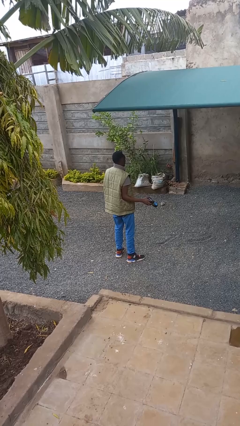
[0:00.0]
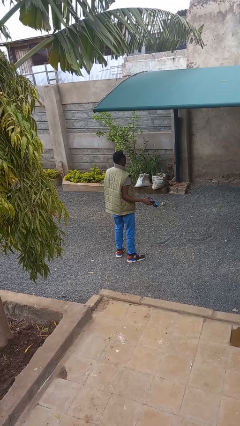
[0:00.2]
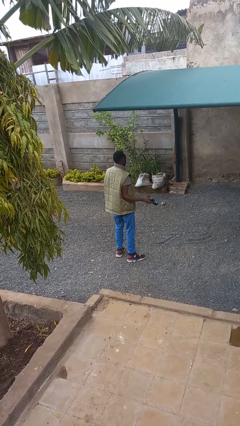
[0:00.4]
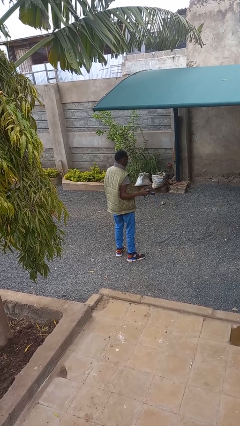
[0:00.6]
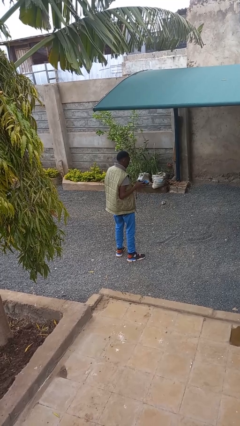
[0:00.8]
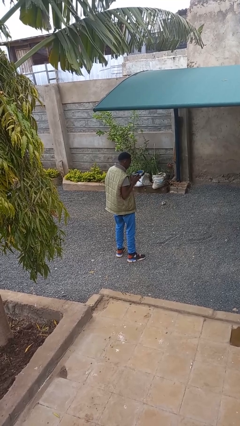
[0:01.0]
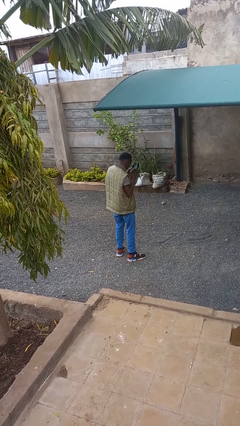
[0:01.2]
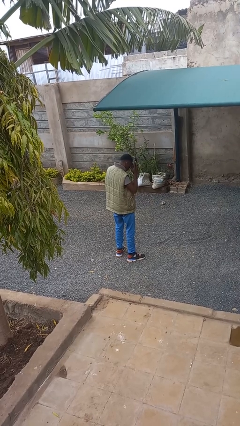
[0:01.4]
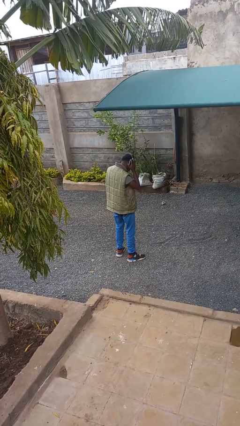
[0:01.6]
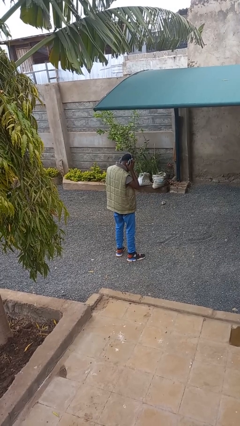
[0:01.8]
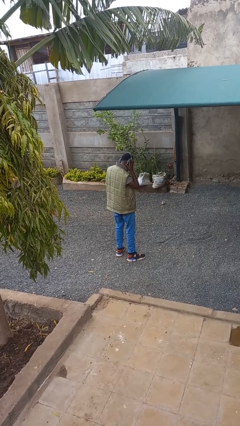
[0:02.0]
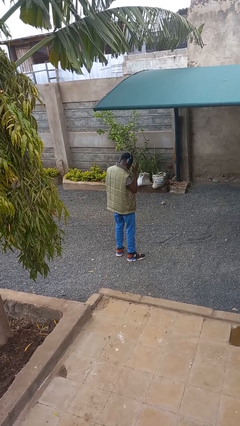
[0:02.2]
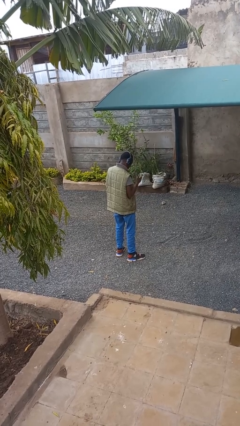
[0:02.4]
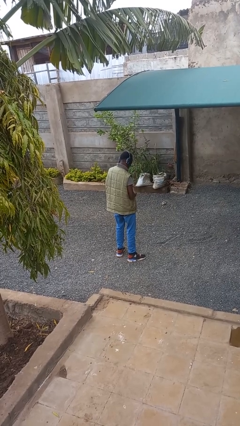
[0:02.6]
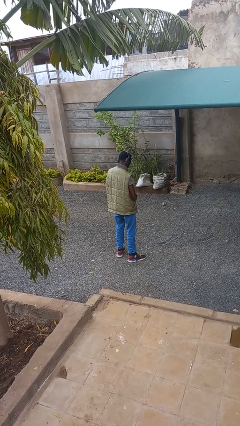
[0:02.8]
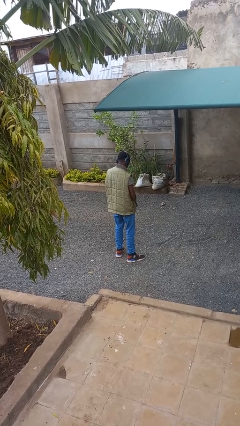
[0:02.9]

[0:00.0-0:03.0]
person puts on headphones

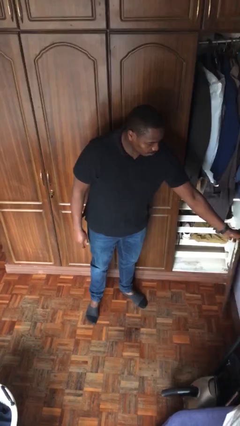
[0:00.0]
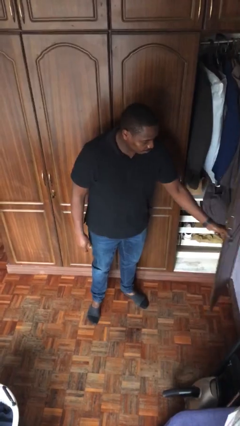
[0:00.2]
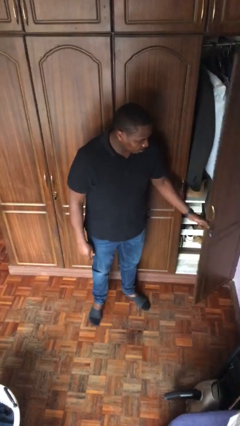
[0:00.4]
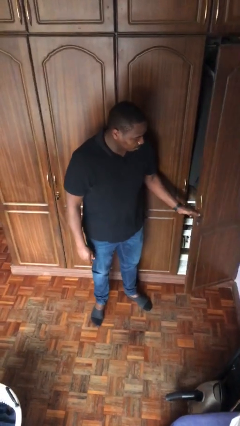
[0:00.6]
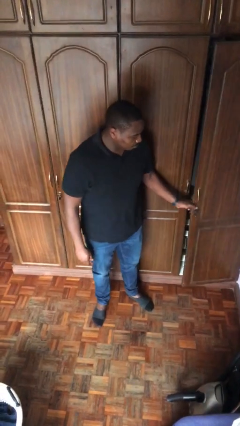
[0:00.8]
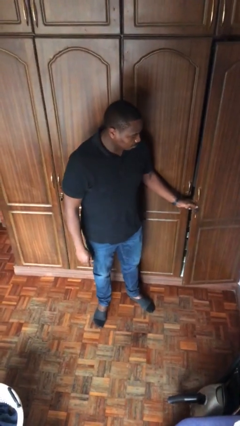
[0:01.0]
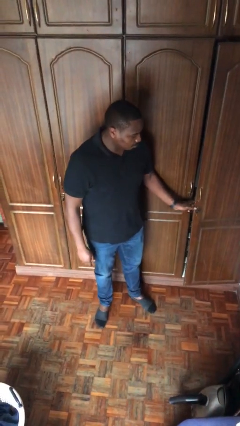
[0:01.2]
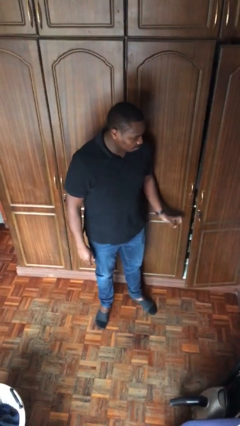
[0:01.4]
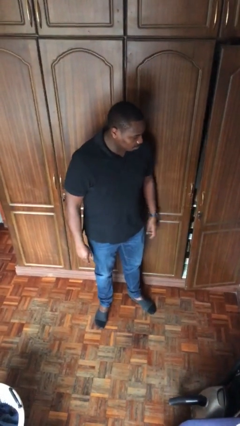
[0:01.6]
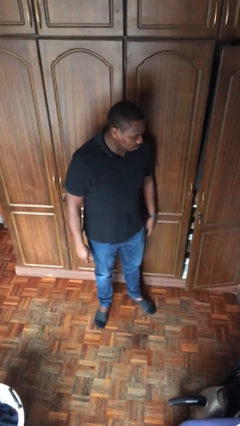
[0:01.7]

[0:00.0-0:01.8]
person closes closet door

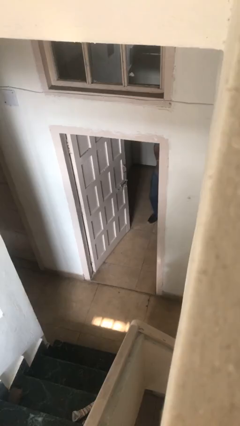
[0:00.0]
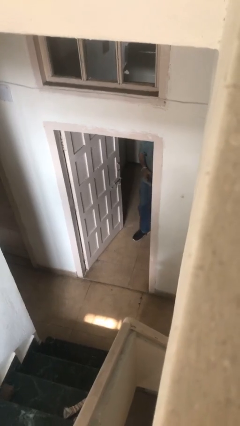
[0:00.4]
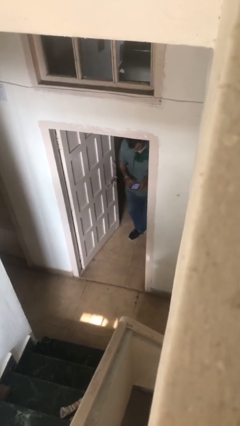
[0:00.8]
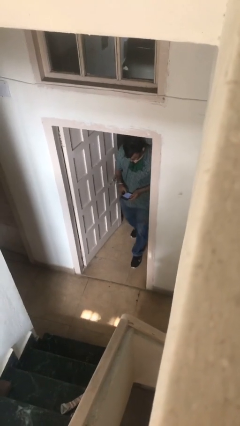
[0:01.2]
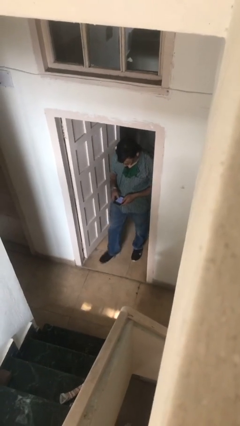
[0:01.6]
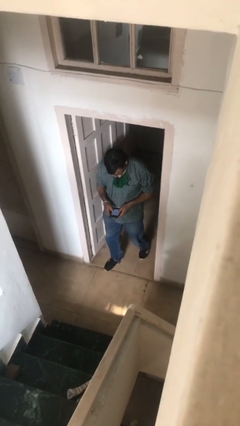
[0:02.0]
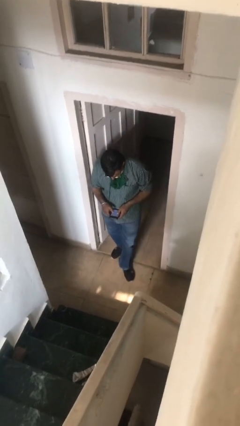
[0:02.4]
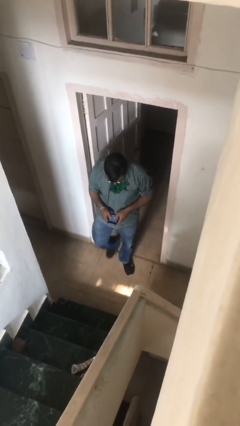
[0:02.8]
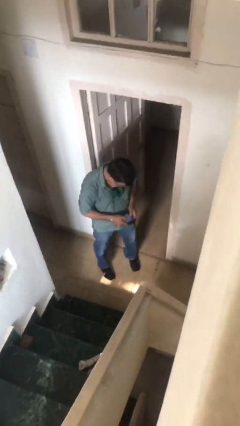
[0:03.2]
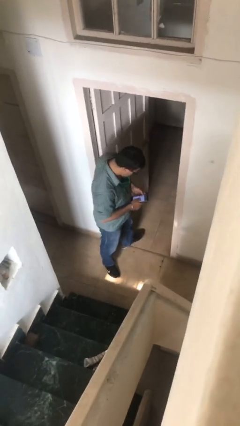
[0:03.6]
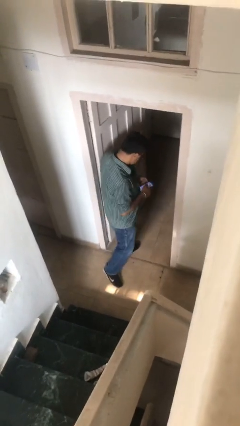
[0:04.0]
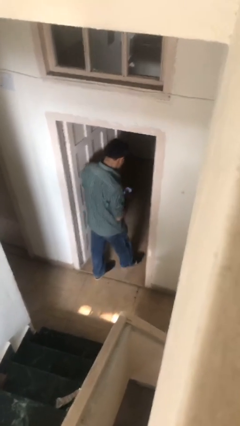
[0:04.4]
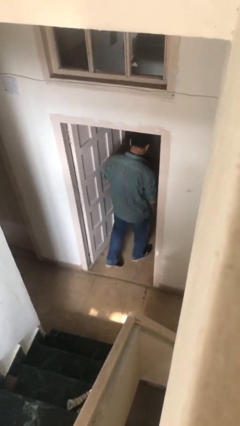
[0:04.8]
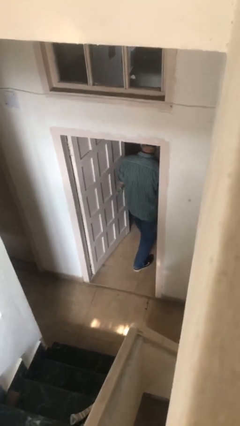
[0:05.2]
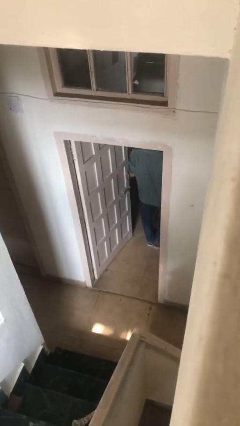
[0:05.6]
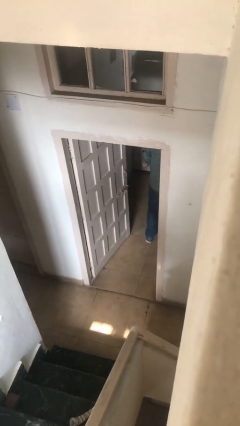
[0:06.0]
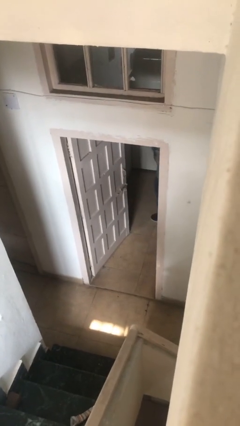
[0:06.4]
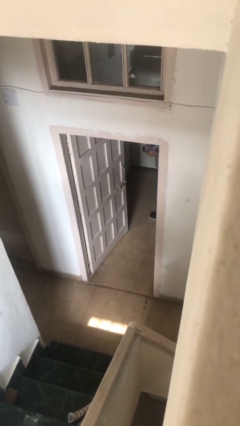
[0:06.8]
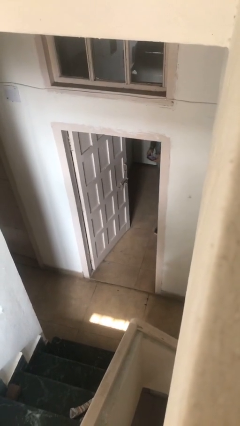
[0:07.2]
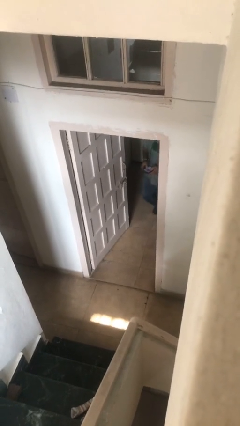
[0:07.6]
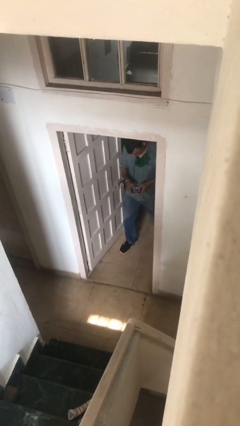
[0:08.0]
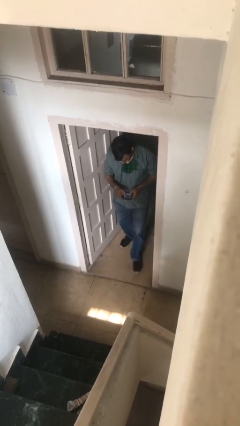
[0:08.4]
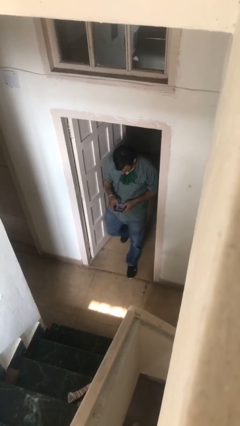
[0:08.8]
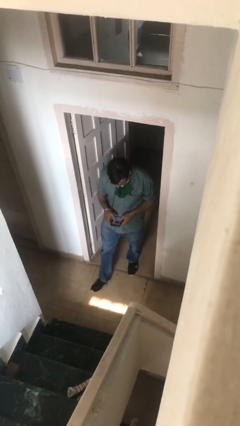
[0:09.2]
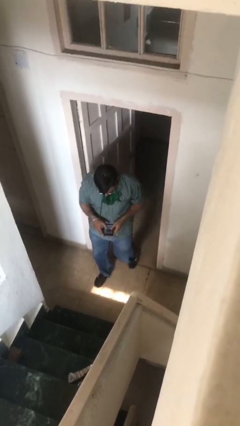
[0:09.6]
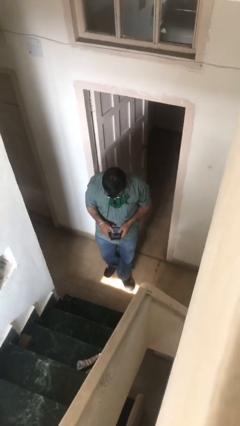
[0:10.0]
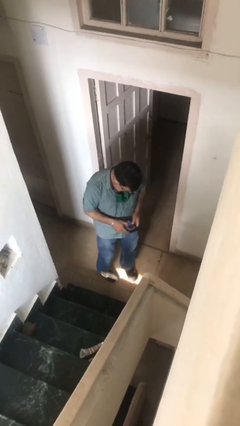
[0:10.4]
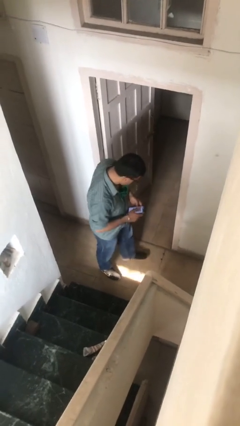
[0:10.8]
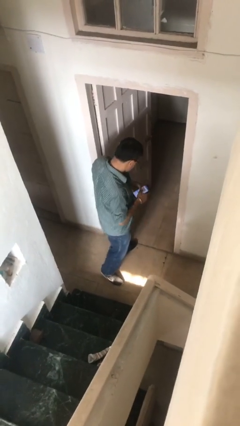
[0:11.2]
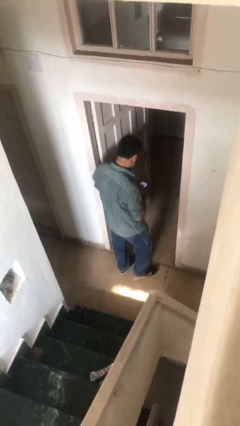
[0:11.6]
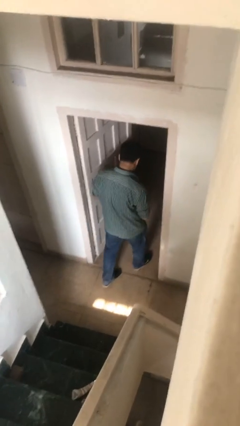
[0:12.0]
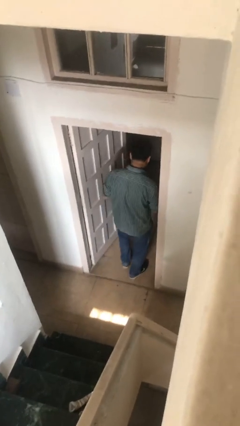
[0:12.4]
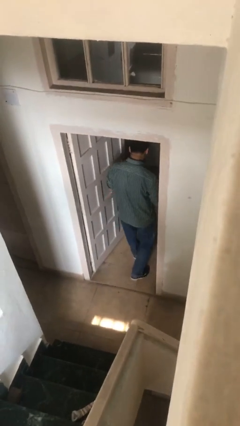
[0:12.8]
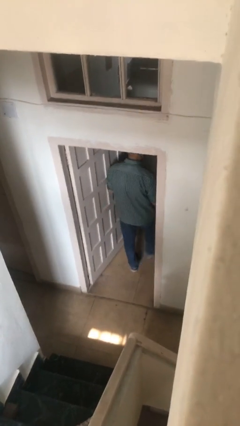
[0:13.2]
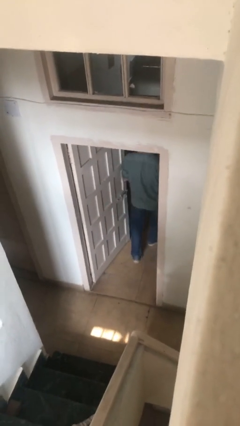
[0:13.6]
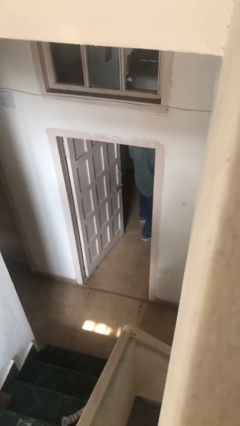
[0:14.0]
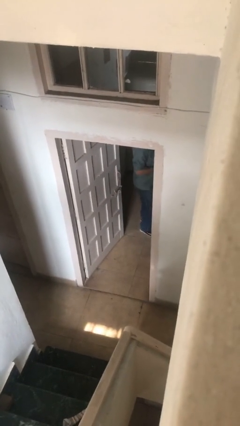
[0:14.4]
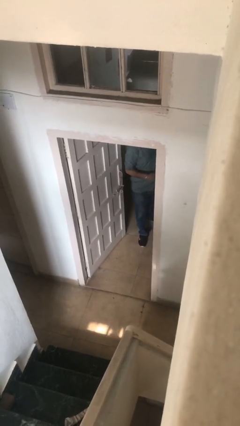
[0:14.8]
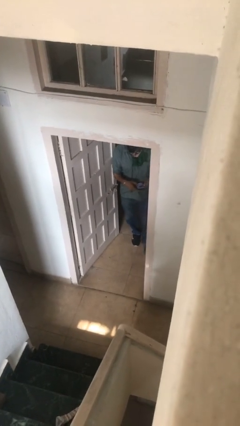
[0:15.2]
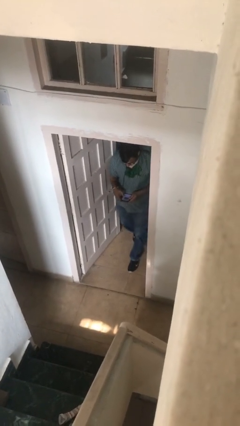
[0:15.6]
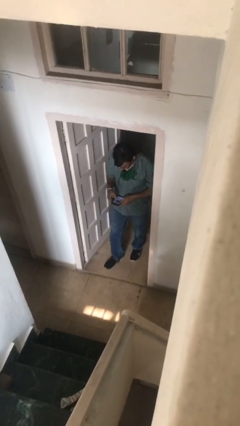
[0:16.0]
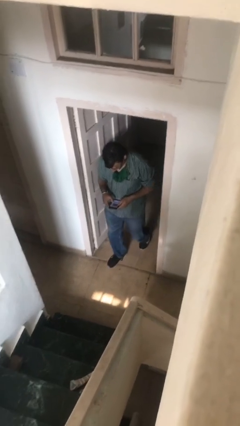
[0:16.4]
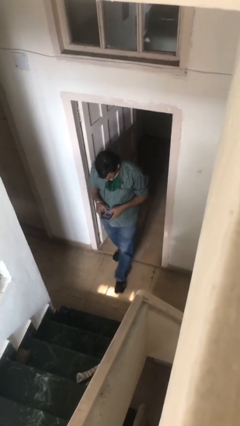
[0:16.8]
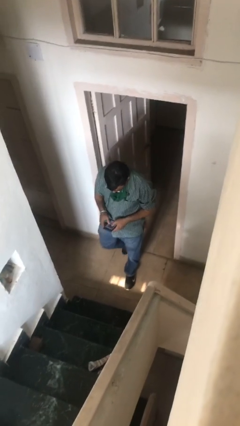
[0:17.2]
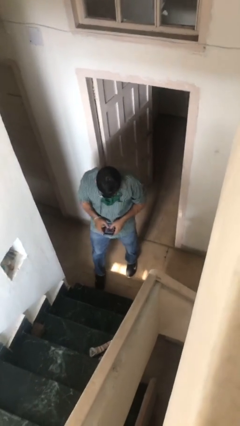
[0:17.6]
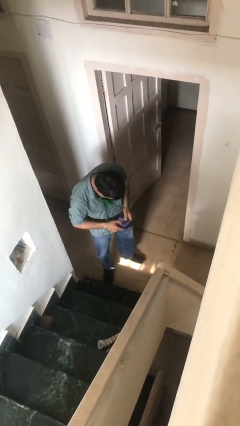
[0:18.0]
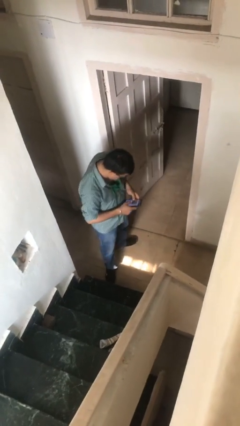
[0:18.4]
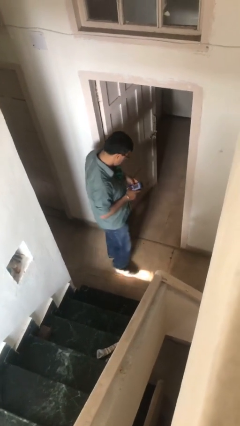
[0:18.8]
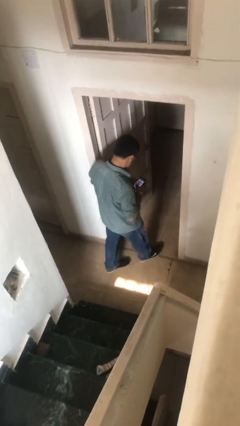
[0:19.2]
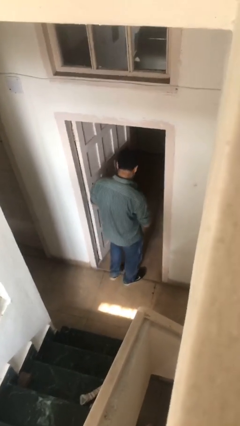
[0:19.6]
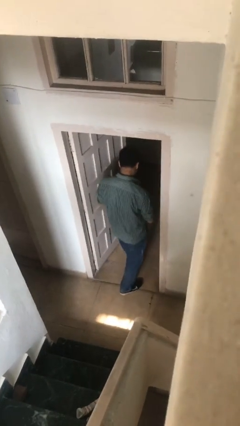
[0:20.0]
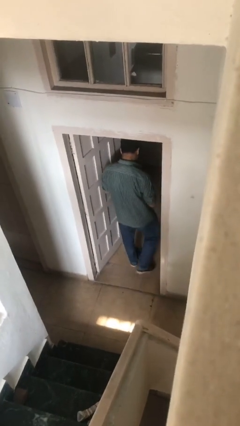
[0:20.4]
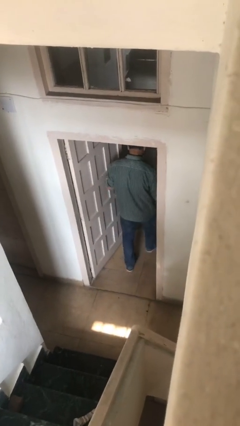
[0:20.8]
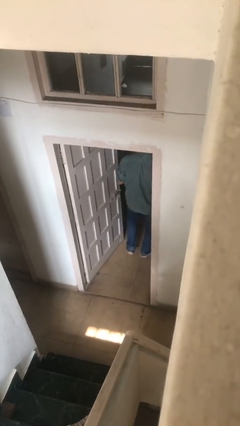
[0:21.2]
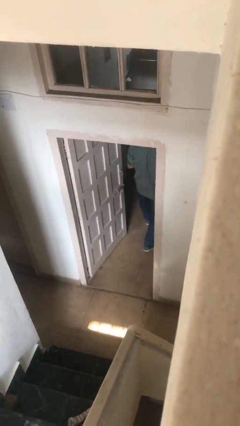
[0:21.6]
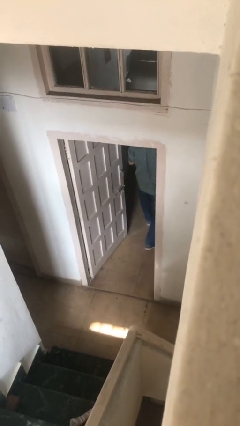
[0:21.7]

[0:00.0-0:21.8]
person texts on phone

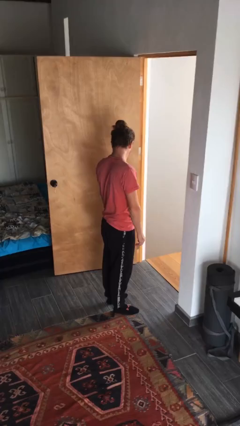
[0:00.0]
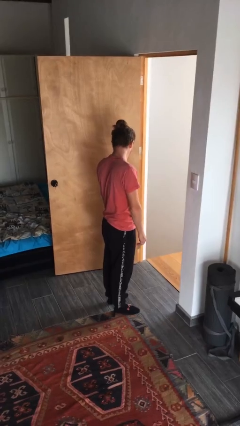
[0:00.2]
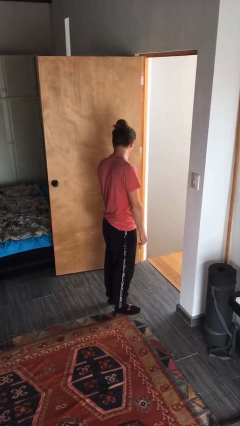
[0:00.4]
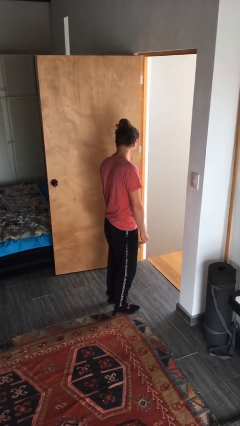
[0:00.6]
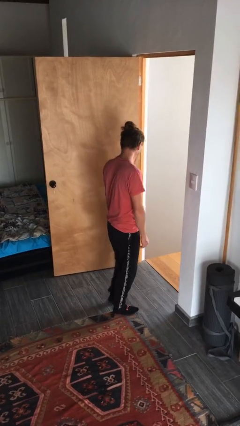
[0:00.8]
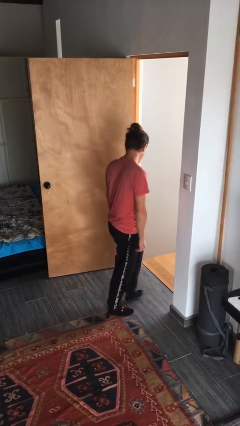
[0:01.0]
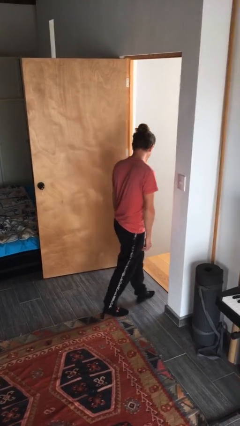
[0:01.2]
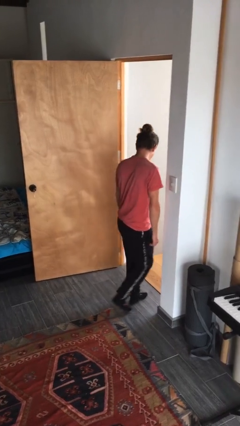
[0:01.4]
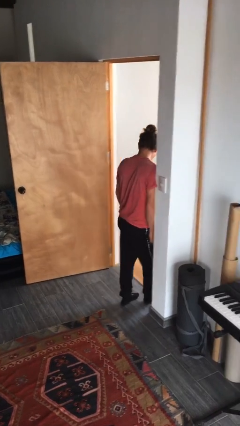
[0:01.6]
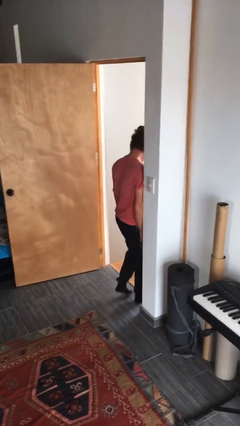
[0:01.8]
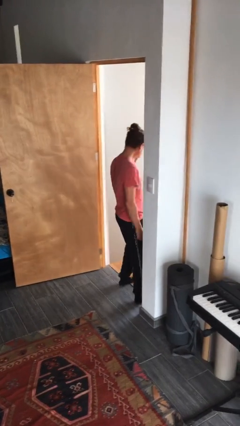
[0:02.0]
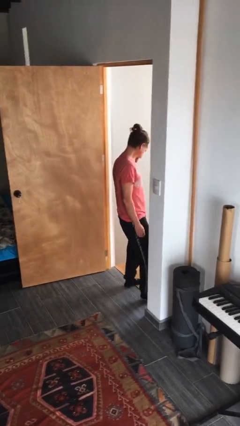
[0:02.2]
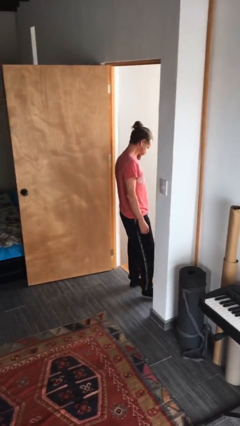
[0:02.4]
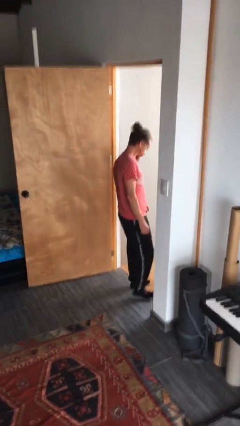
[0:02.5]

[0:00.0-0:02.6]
person bumps into wall
